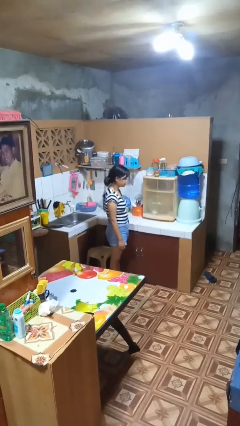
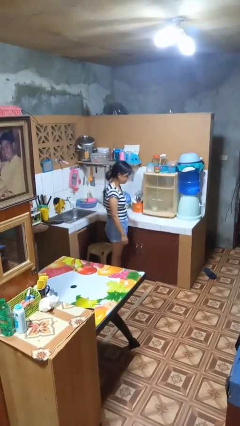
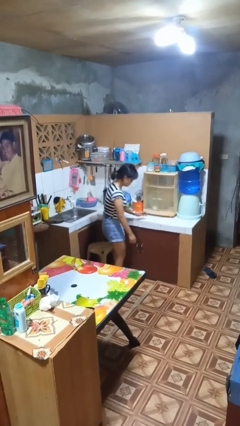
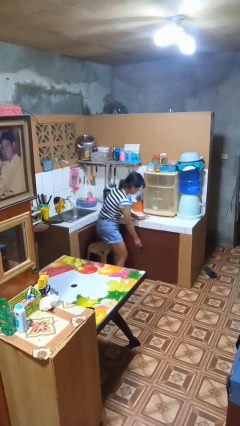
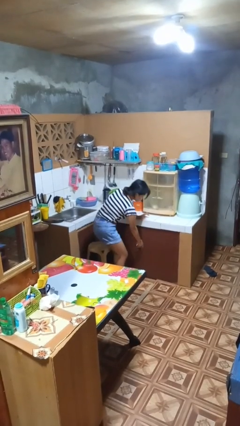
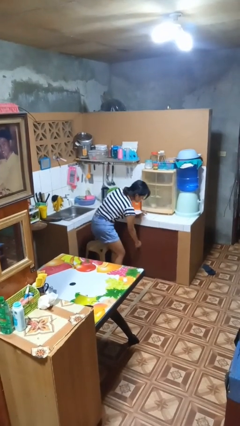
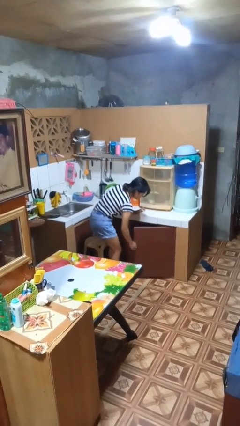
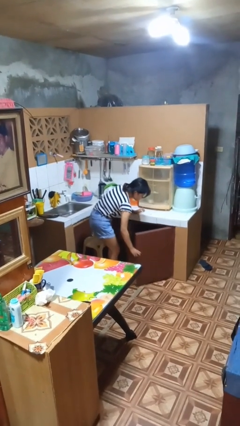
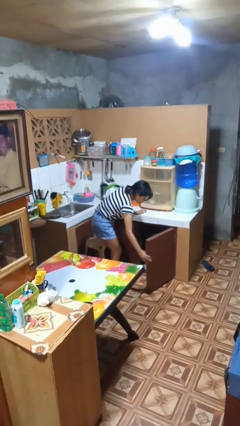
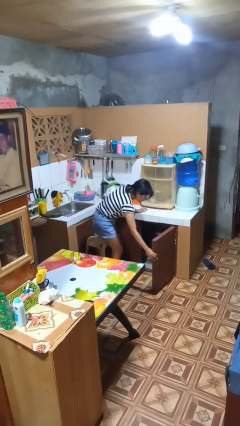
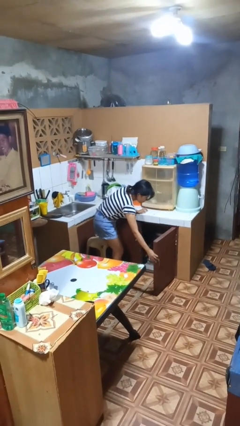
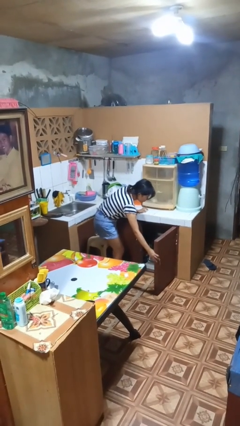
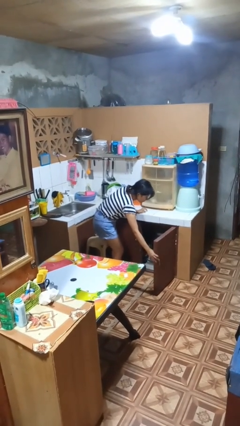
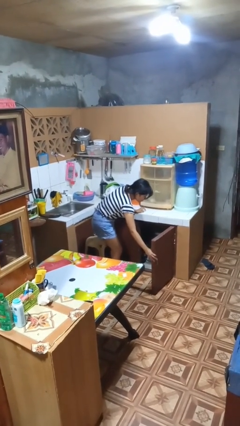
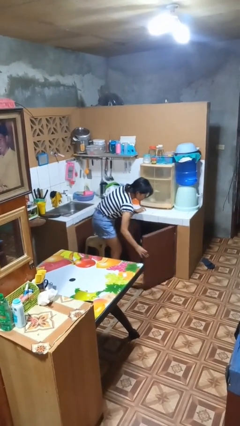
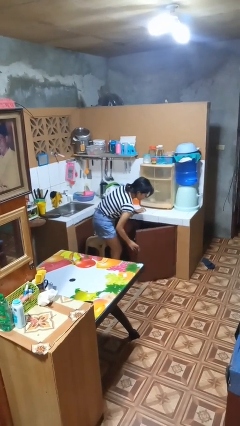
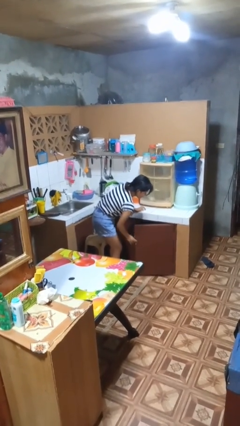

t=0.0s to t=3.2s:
person opens cabinet

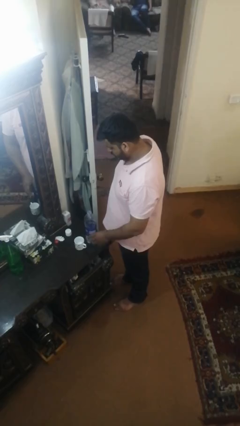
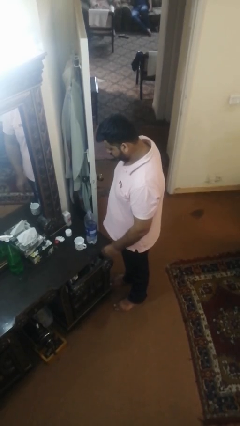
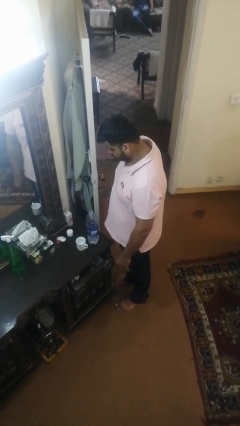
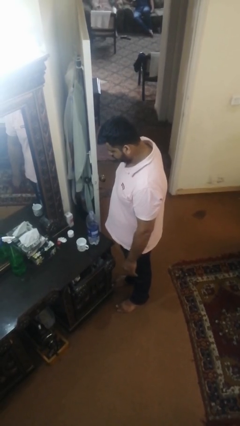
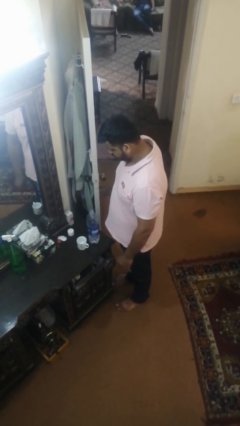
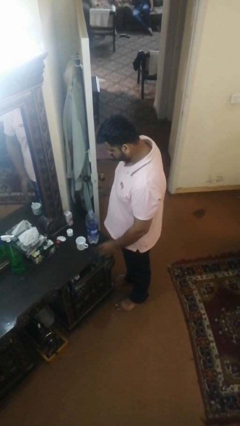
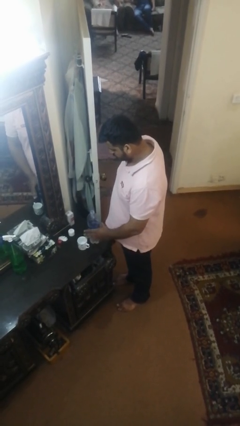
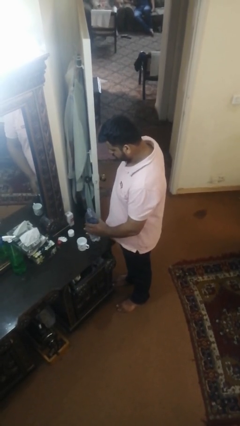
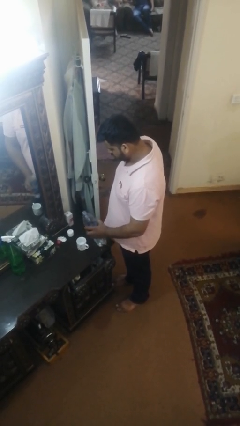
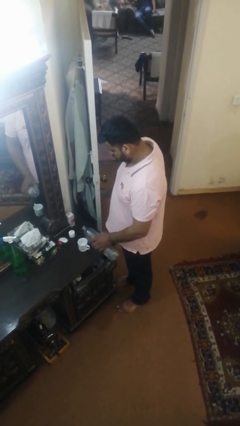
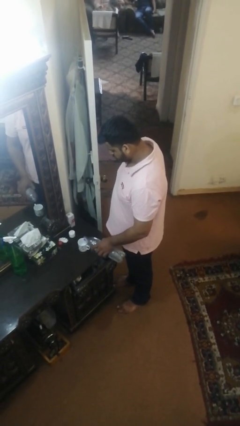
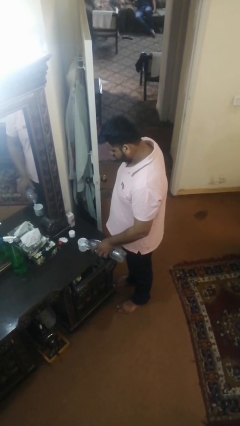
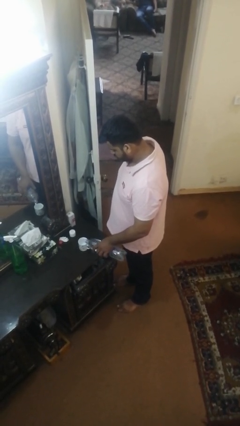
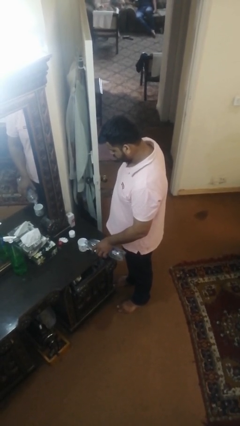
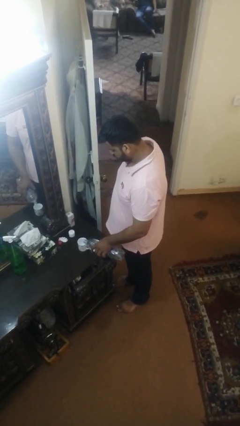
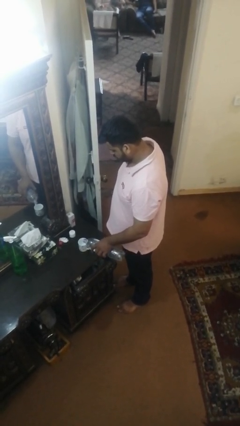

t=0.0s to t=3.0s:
person pours liquid into cup

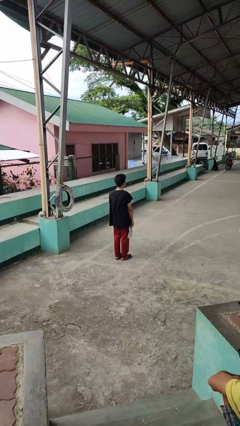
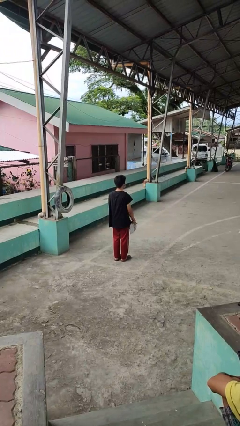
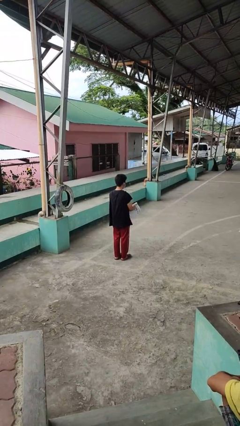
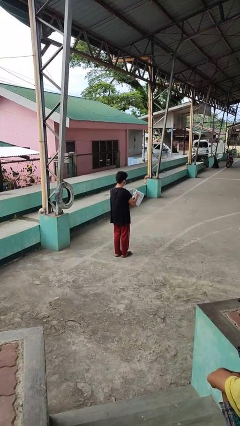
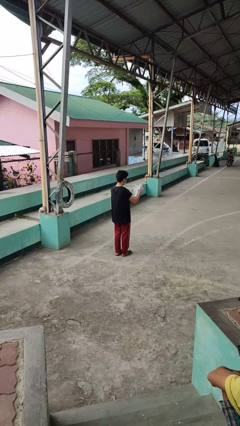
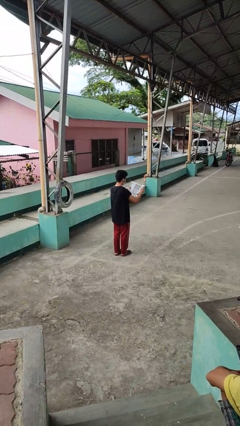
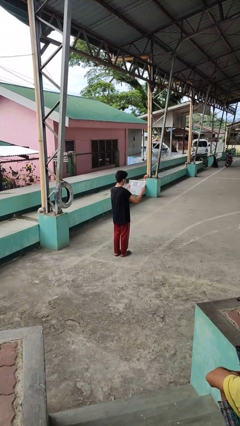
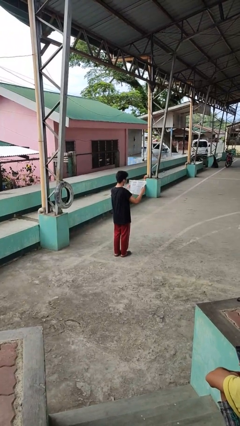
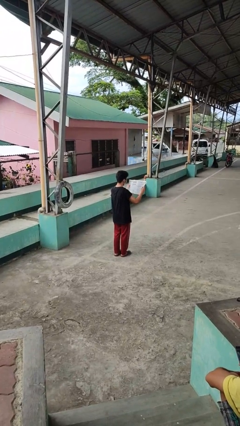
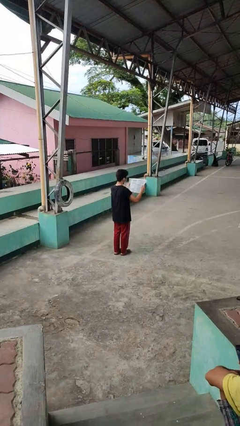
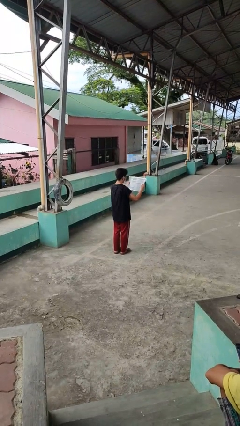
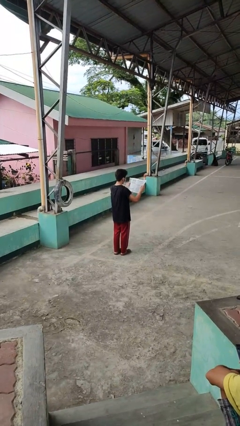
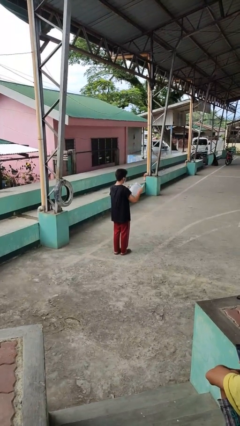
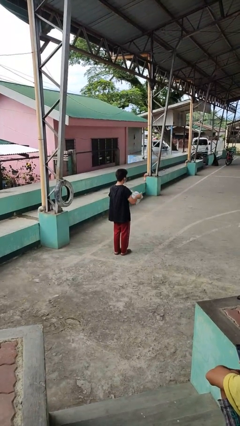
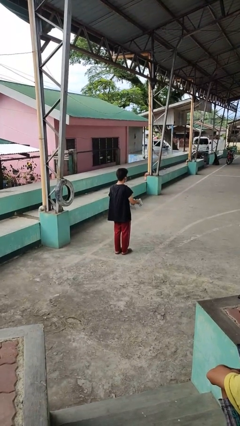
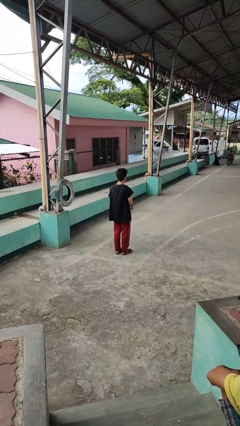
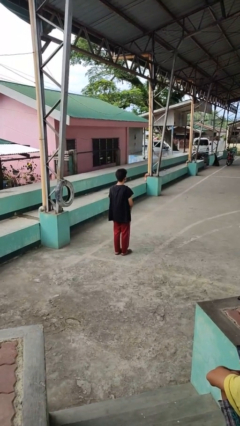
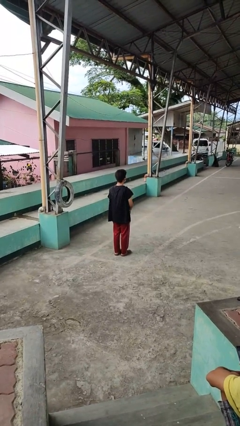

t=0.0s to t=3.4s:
person reads newspaper

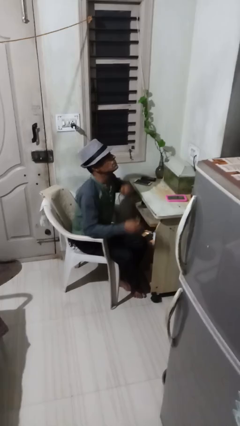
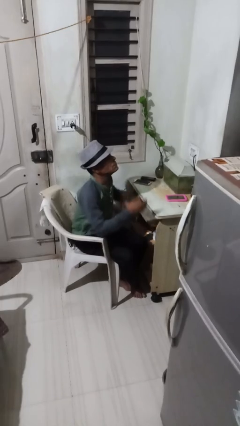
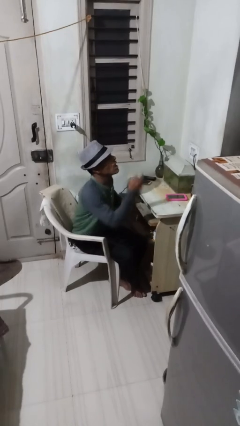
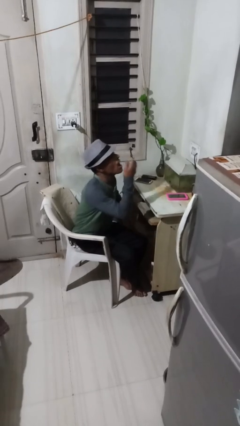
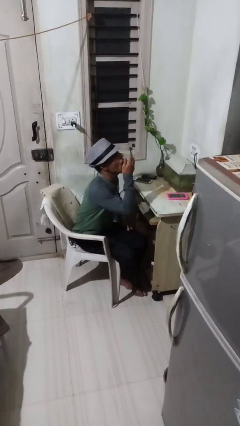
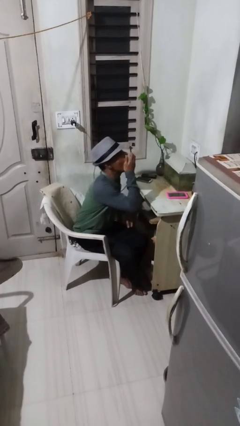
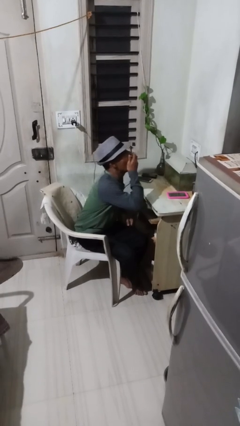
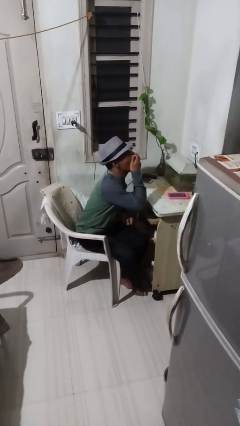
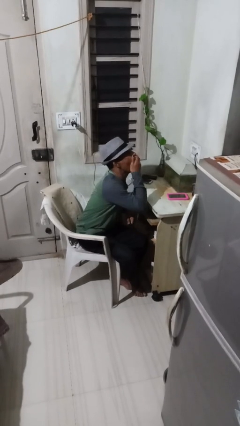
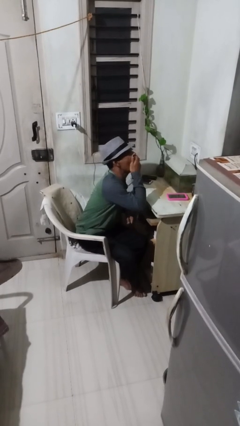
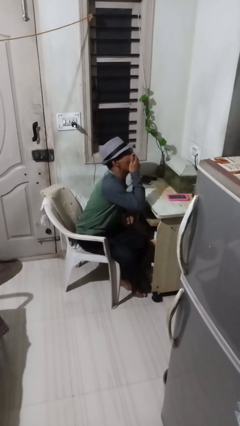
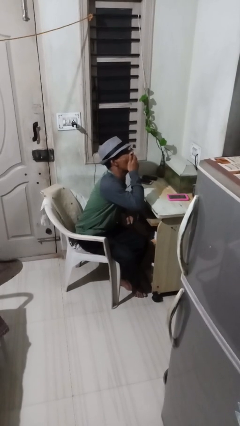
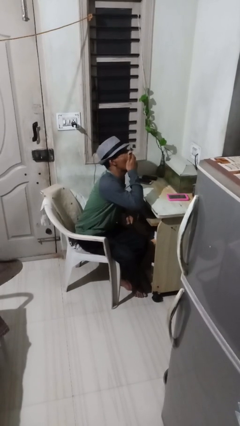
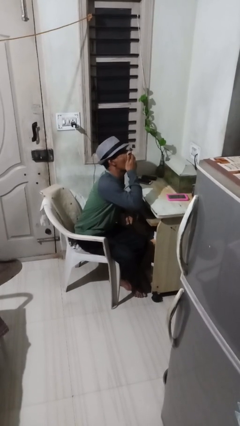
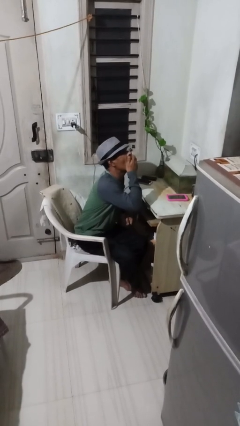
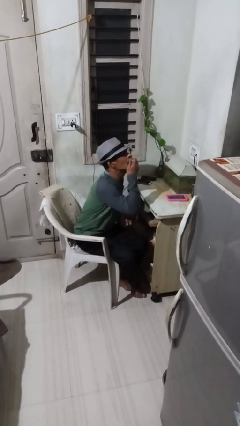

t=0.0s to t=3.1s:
person yawns

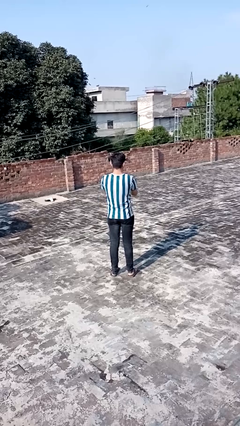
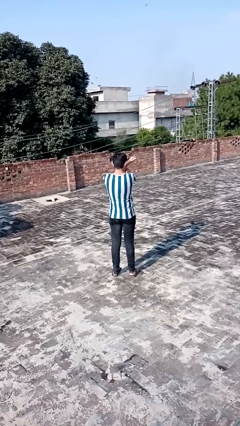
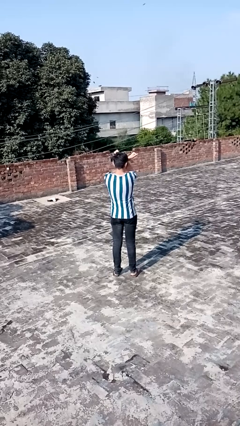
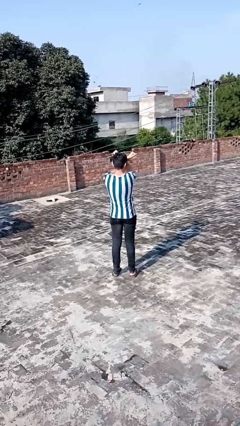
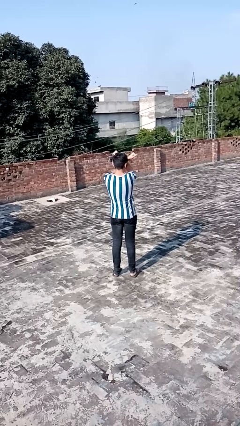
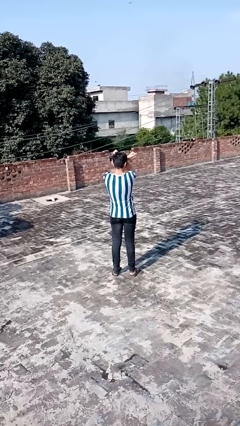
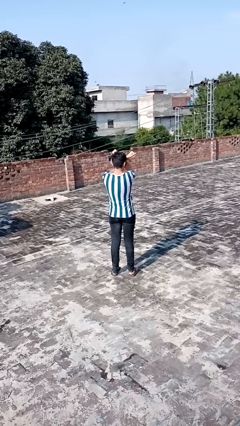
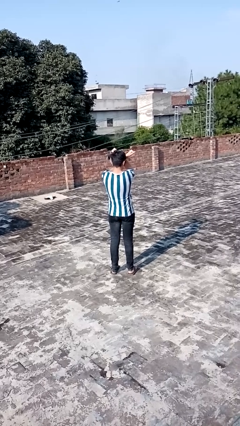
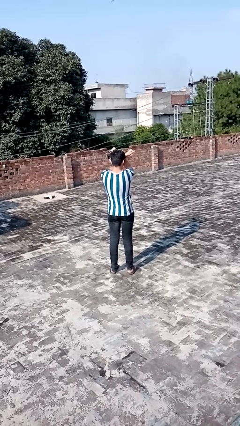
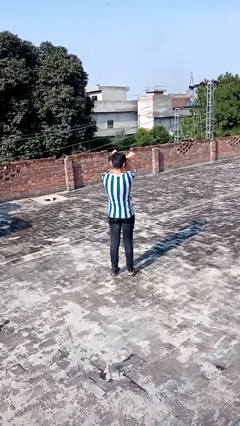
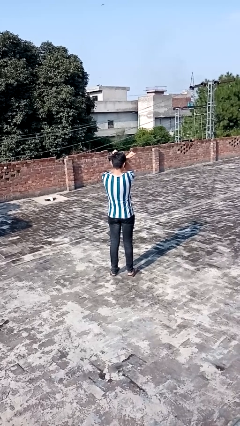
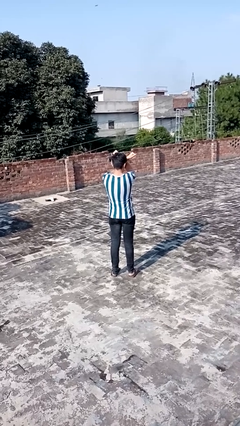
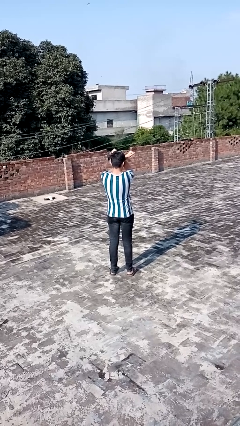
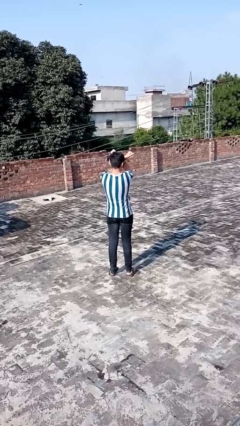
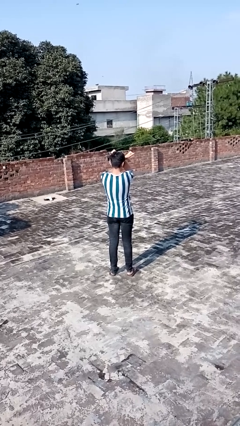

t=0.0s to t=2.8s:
person gestures arms x

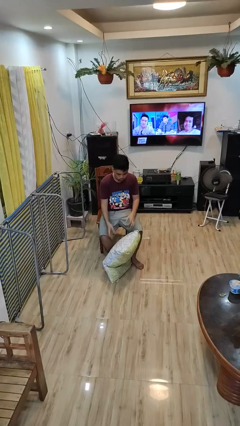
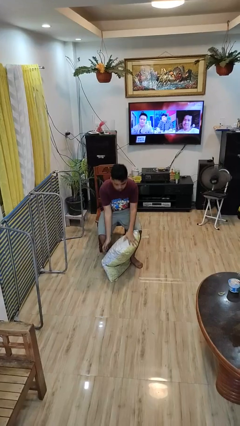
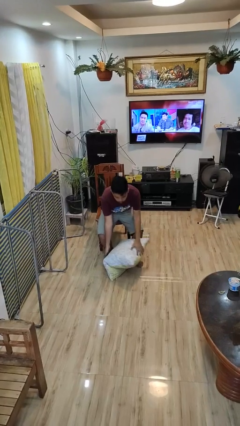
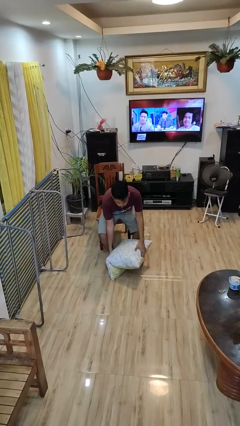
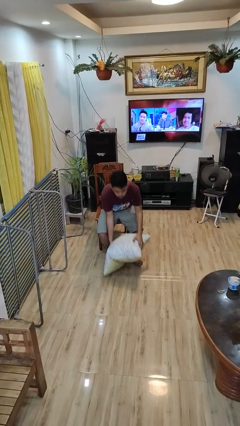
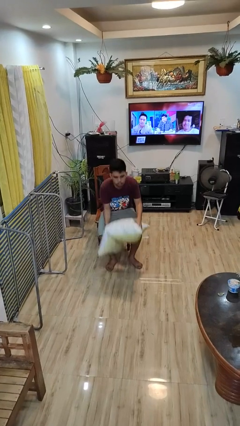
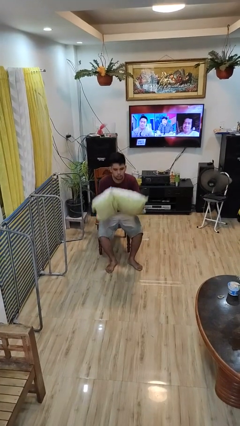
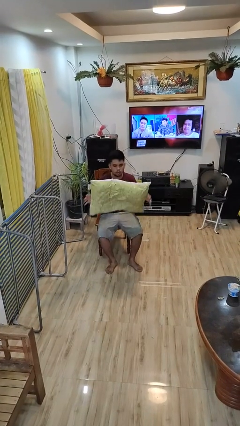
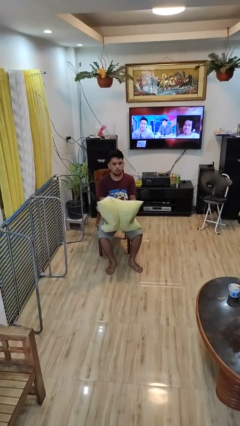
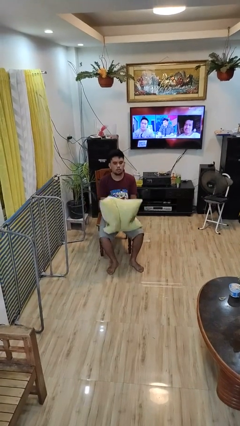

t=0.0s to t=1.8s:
person picks up object from floor
